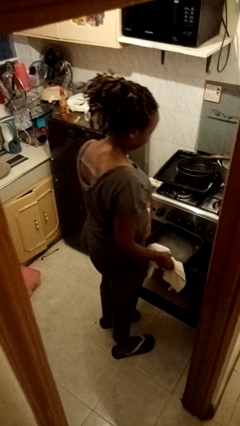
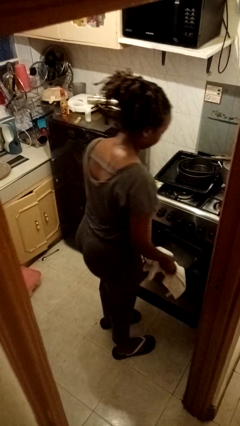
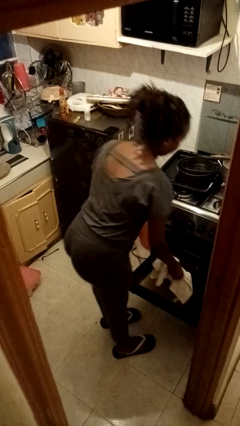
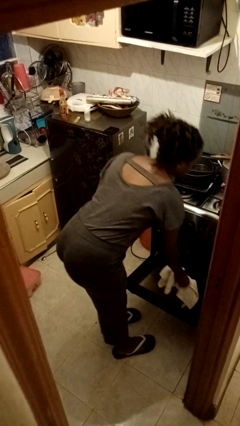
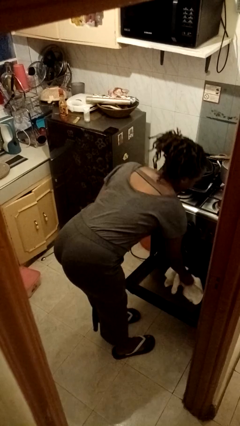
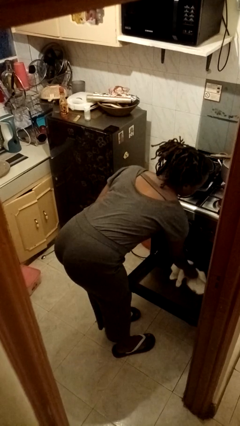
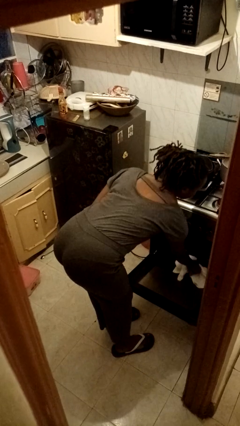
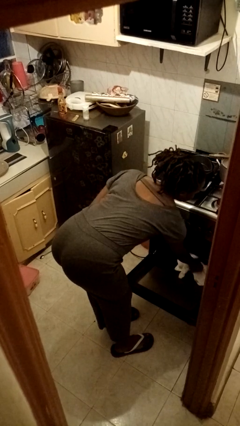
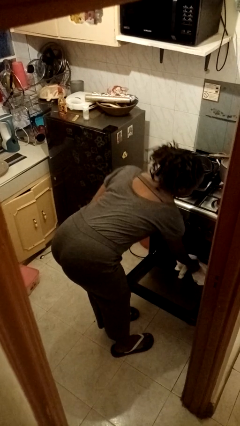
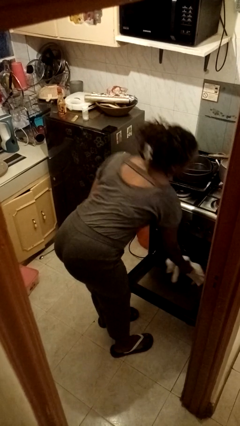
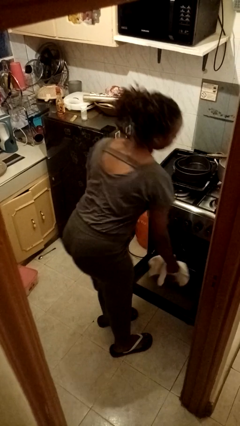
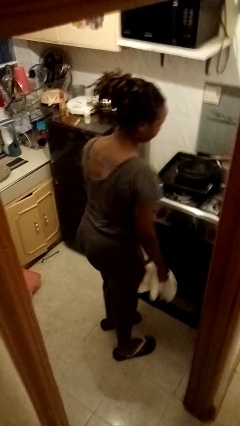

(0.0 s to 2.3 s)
person puts object into oven

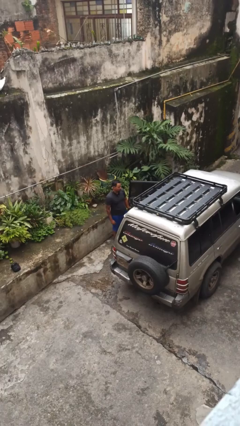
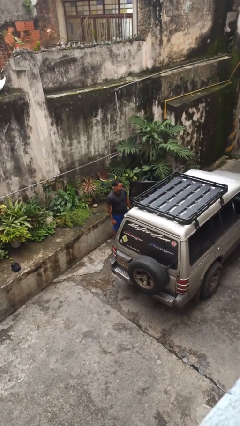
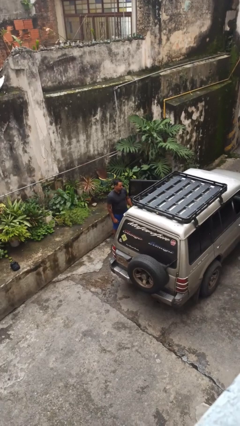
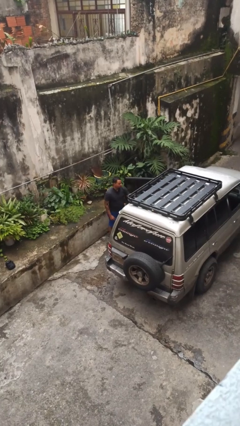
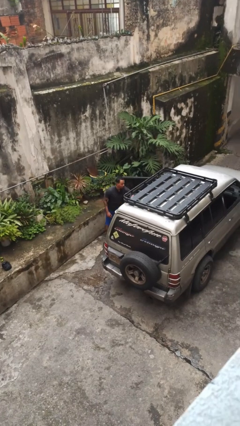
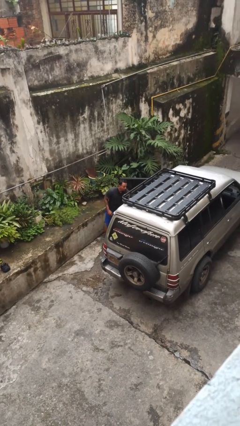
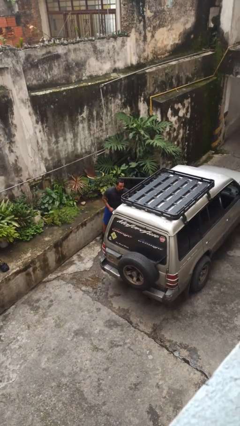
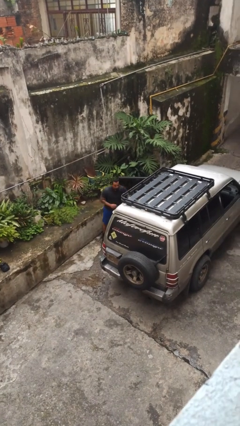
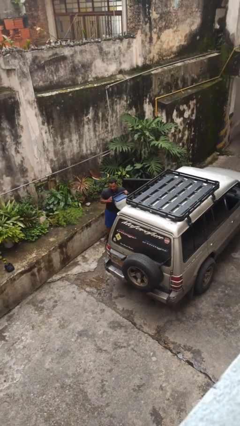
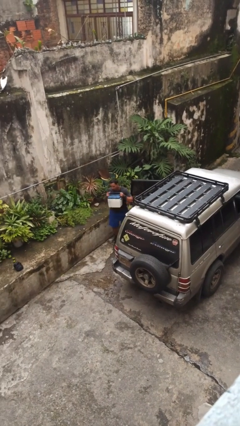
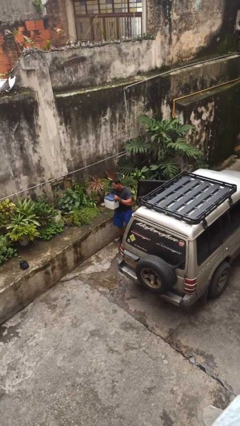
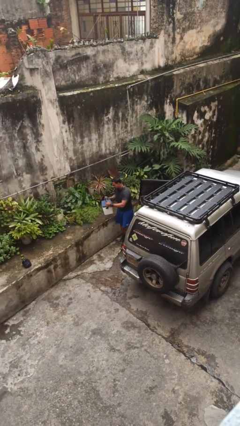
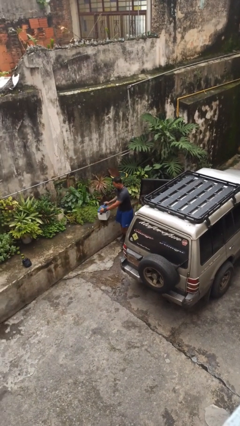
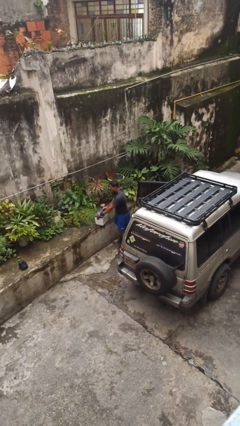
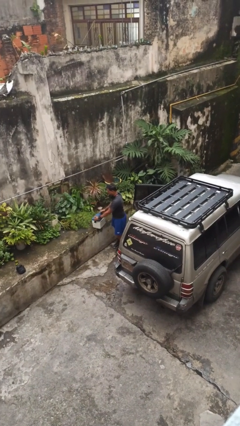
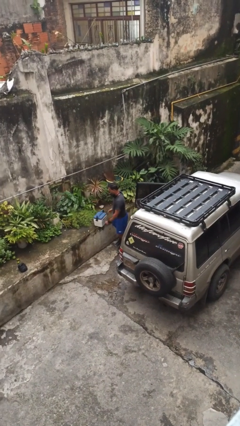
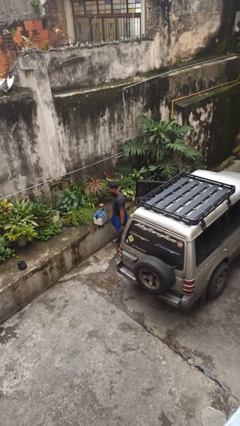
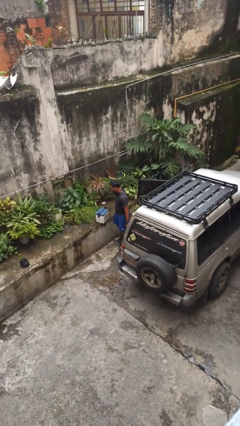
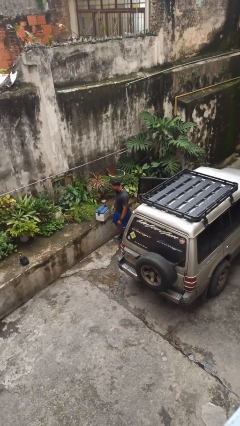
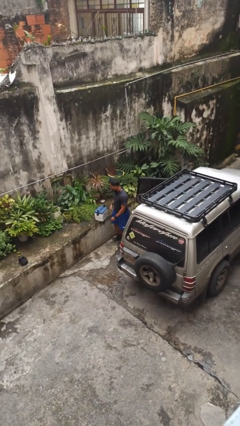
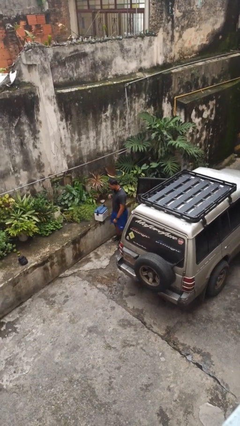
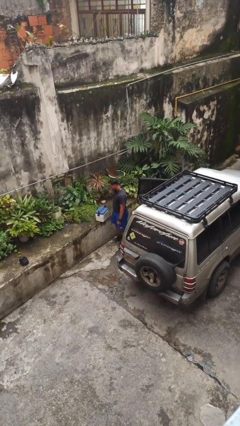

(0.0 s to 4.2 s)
person unloads car

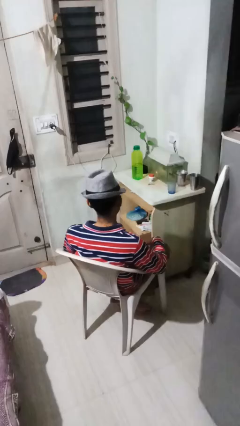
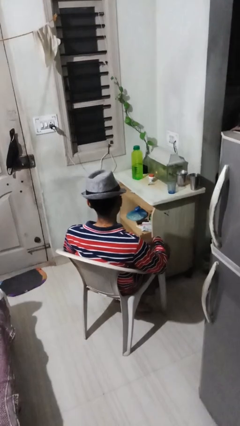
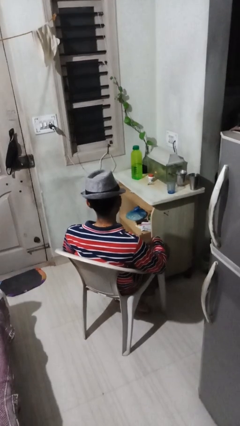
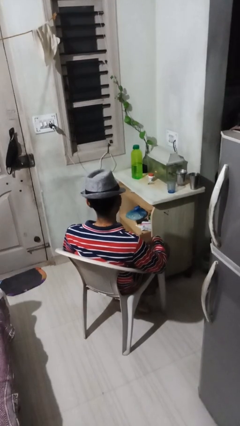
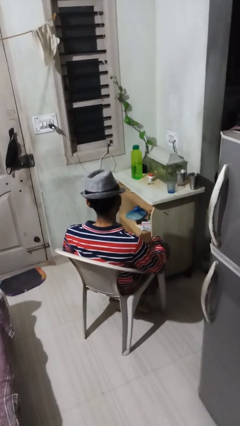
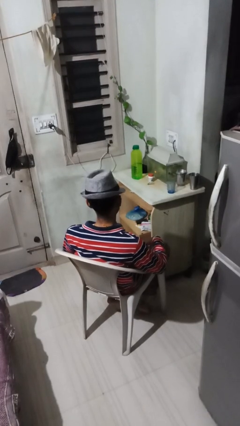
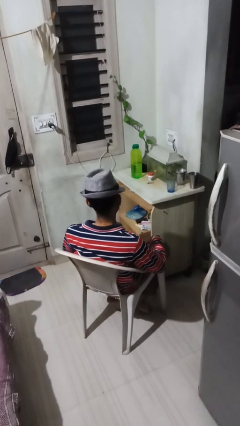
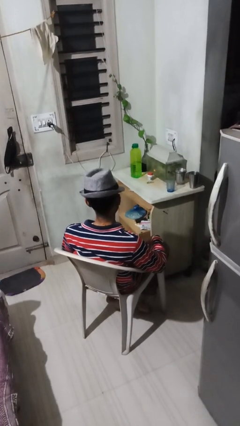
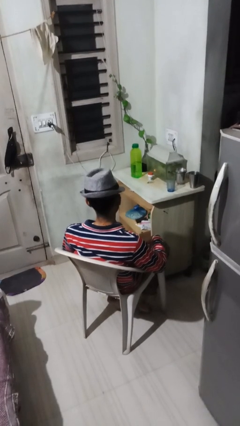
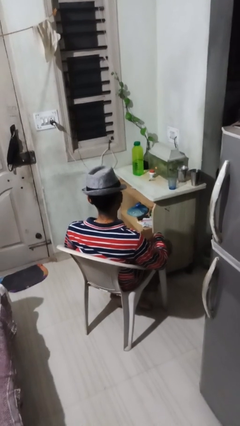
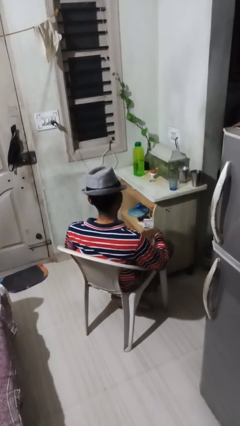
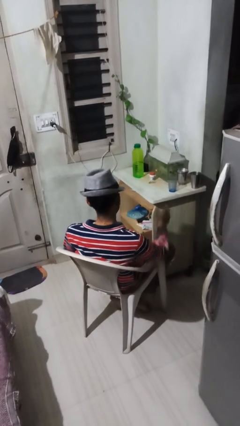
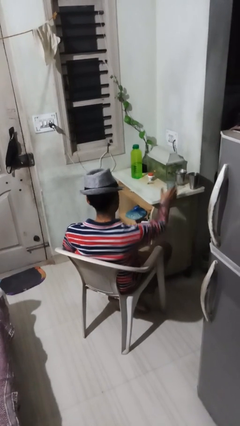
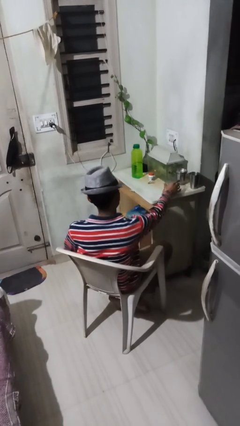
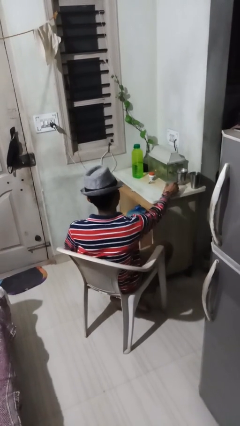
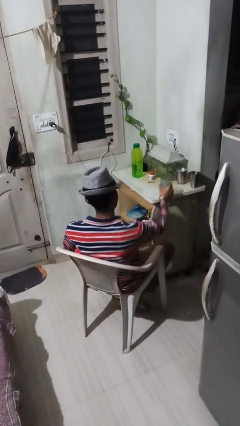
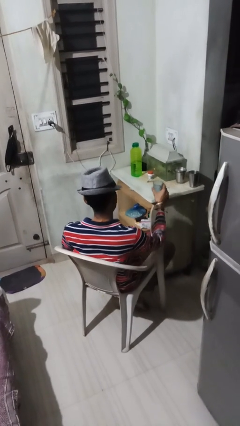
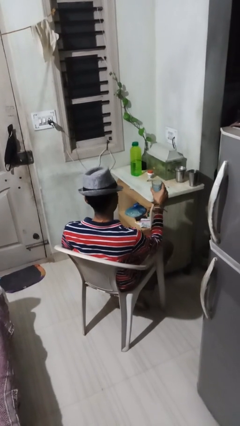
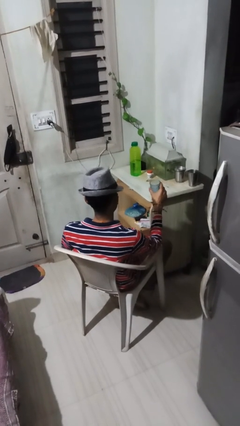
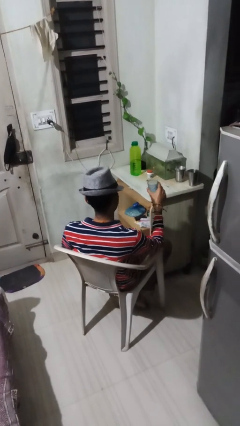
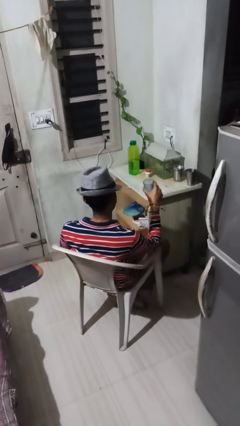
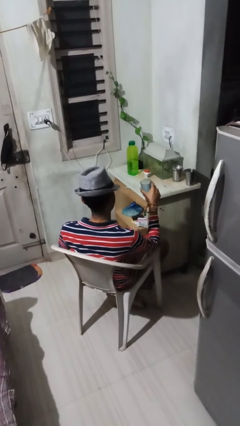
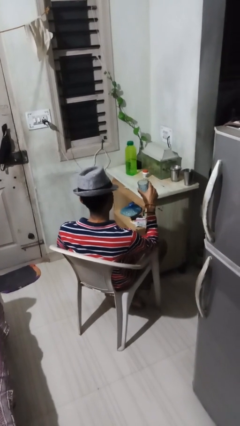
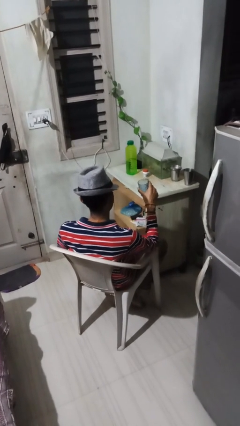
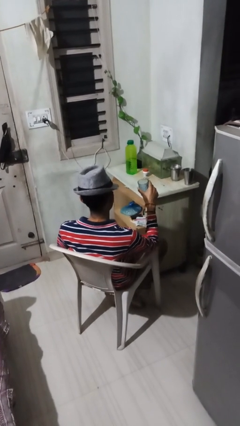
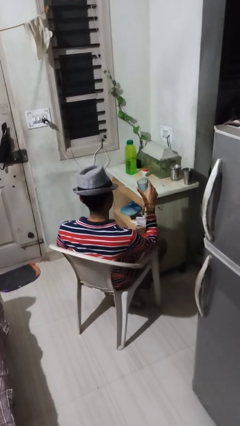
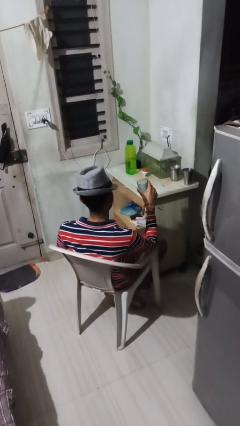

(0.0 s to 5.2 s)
person picks up object from table

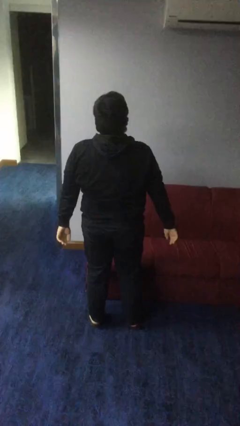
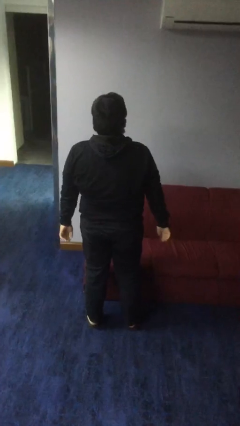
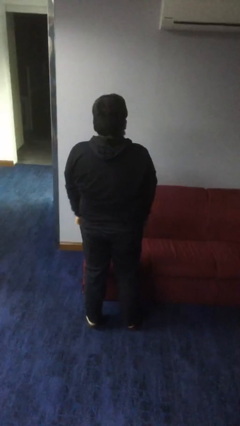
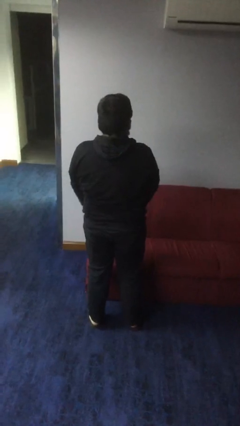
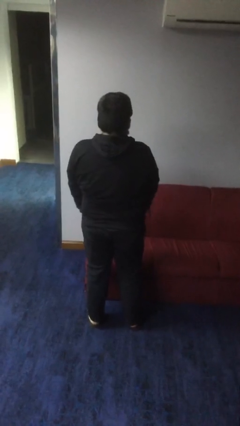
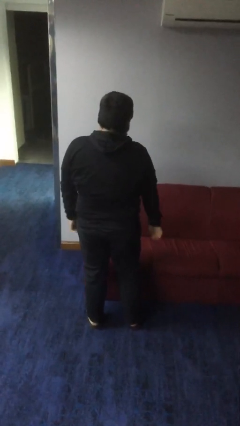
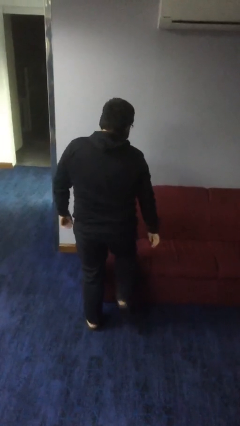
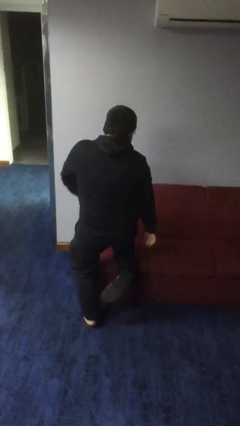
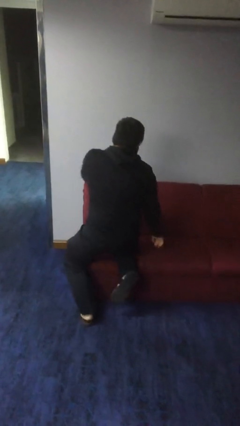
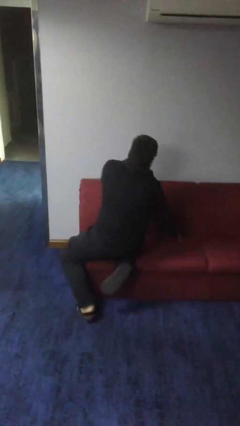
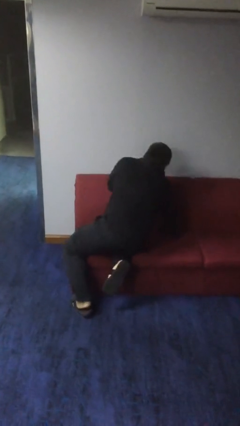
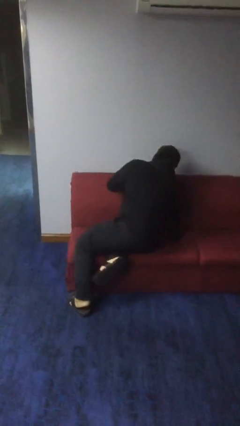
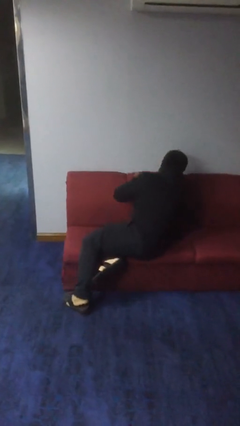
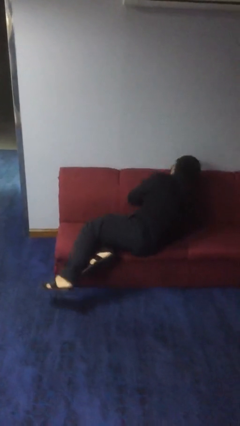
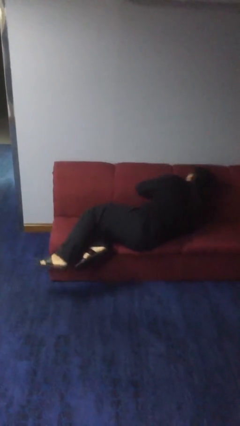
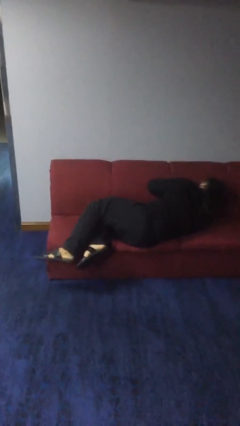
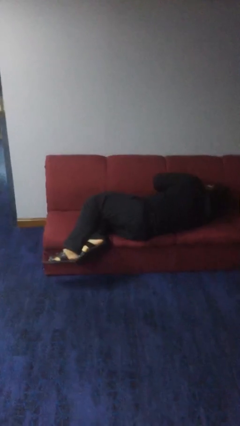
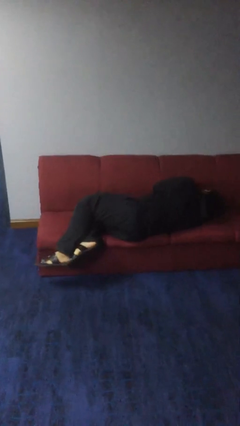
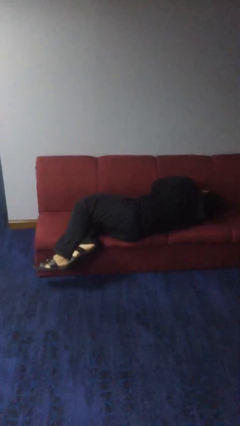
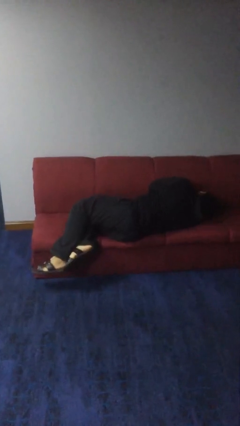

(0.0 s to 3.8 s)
person lies down on couch

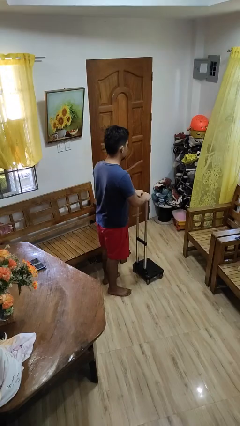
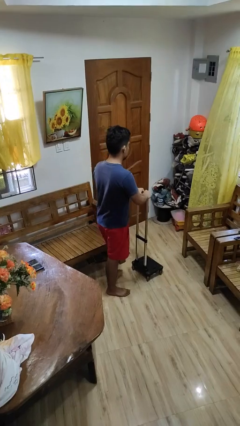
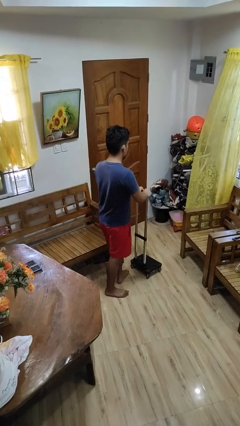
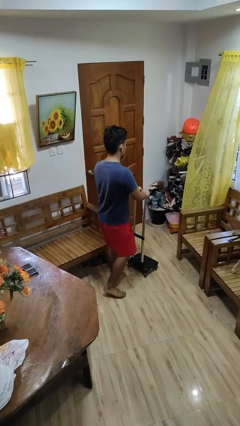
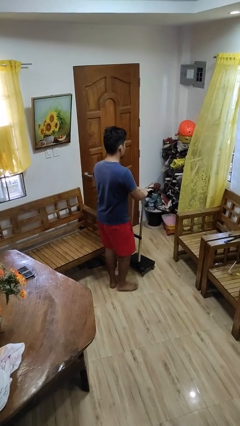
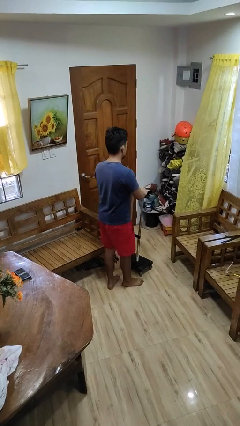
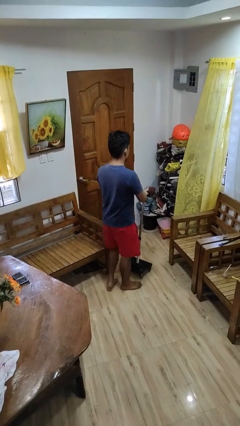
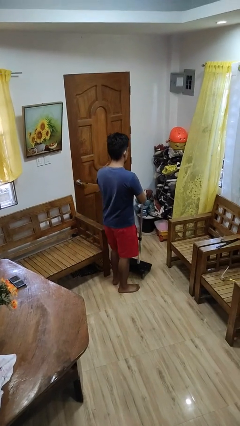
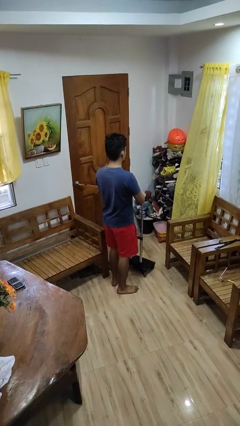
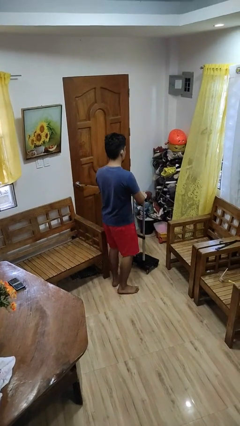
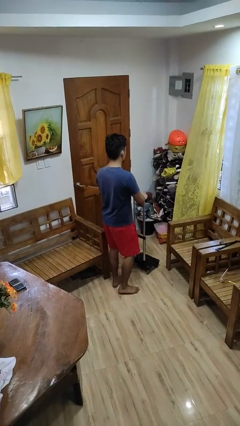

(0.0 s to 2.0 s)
person pushes wheeled cart

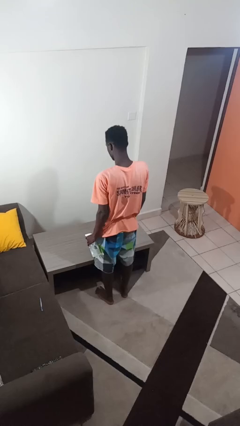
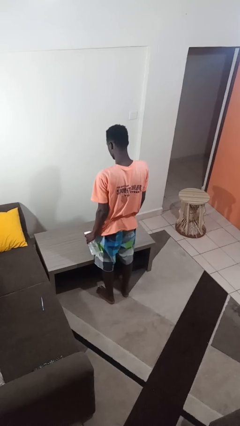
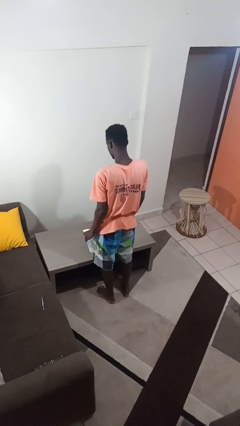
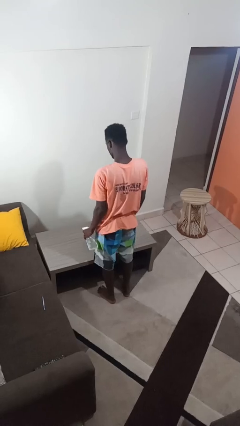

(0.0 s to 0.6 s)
person sprays from bottle
